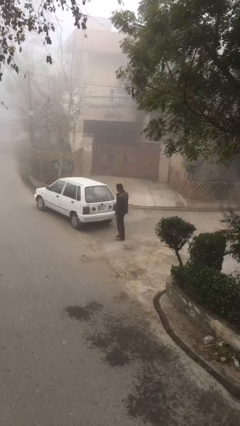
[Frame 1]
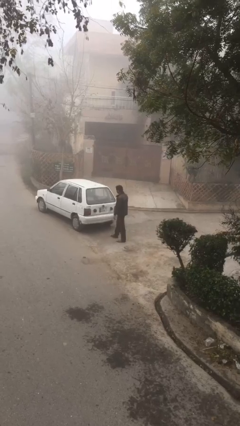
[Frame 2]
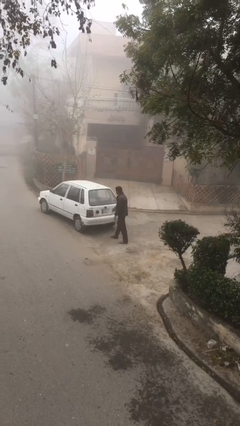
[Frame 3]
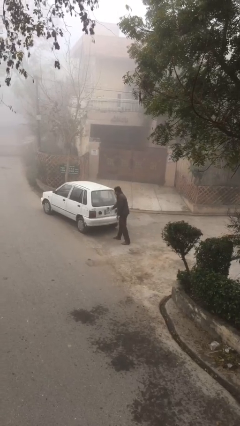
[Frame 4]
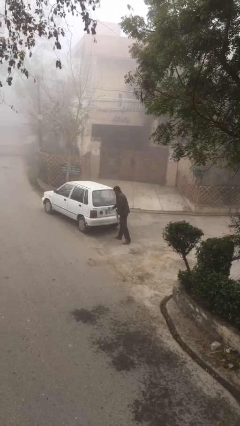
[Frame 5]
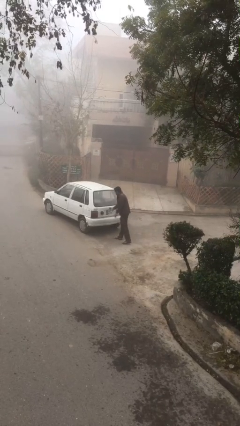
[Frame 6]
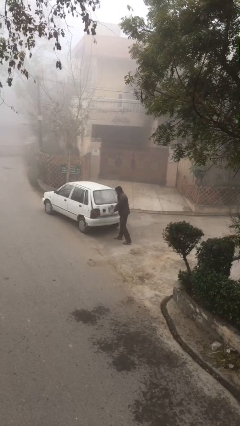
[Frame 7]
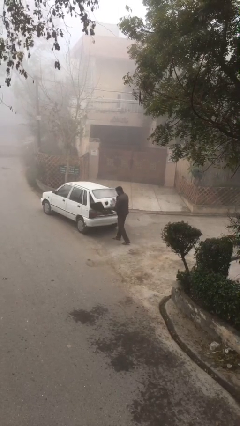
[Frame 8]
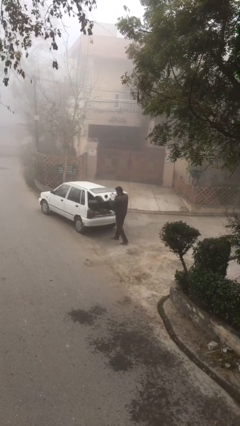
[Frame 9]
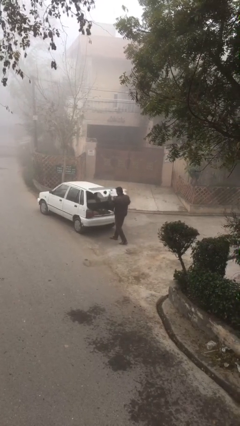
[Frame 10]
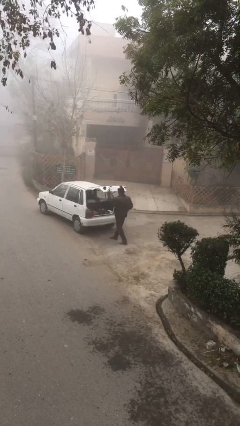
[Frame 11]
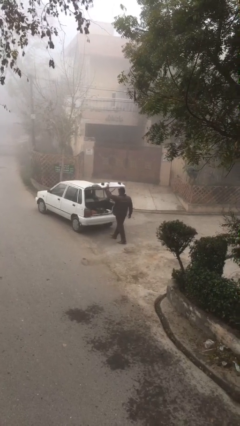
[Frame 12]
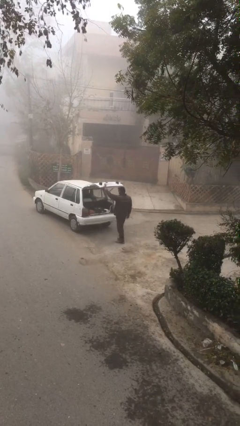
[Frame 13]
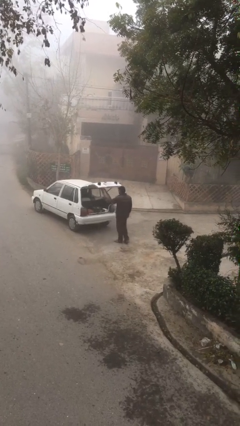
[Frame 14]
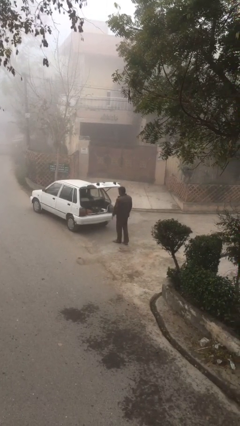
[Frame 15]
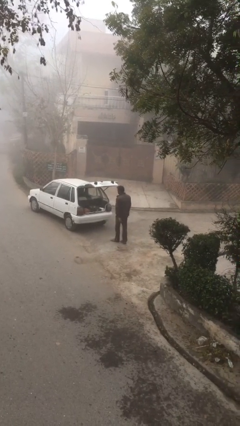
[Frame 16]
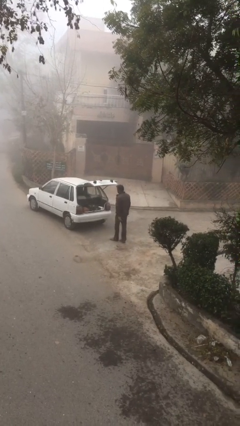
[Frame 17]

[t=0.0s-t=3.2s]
person opens car trunk

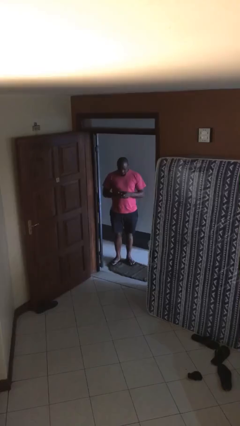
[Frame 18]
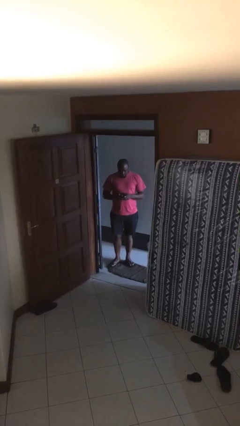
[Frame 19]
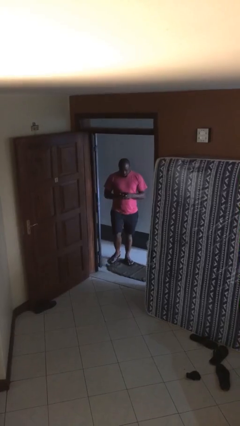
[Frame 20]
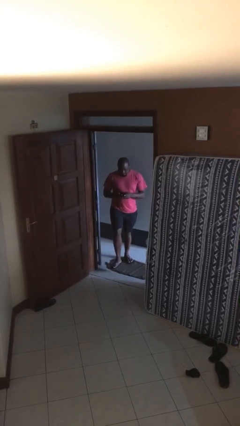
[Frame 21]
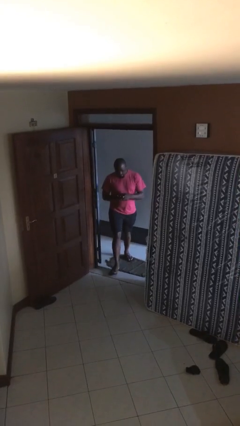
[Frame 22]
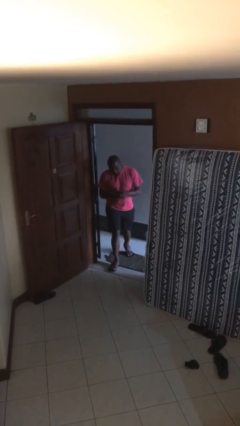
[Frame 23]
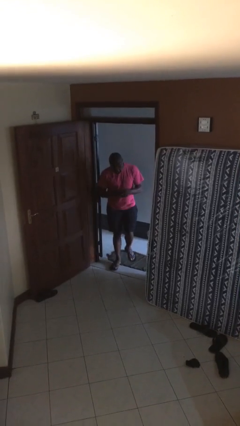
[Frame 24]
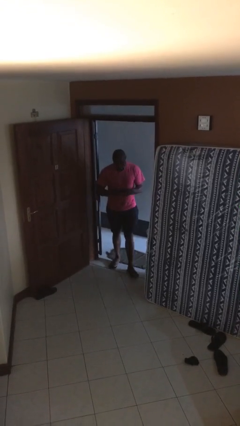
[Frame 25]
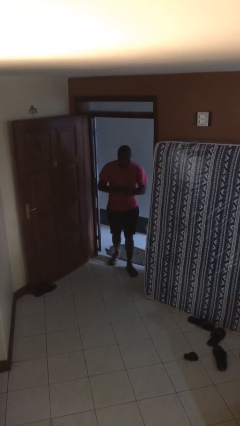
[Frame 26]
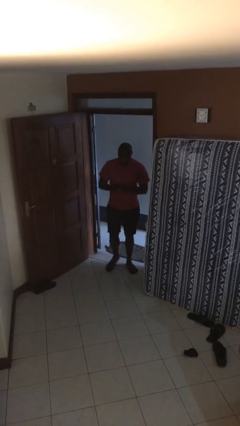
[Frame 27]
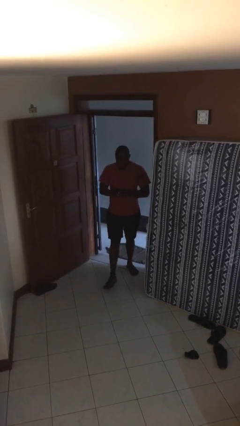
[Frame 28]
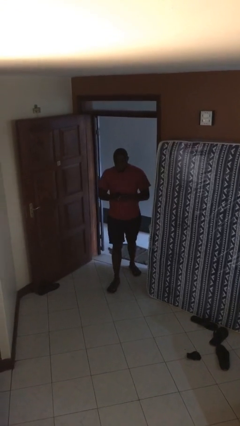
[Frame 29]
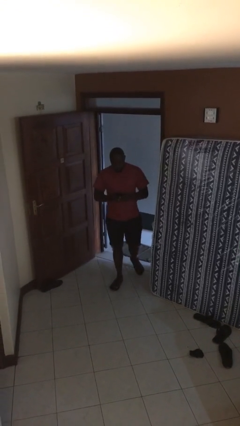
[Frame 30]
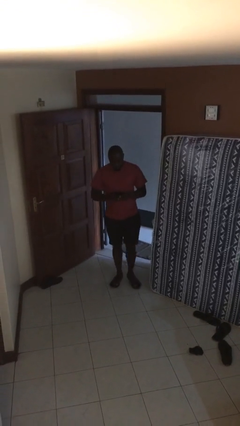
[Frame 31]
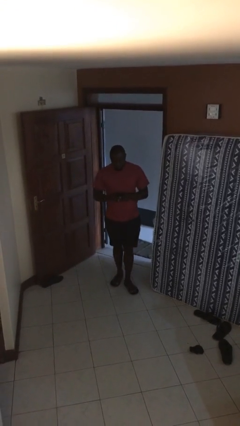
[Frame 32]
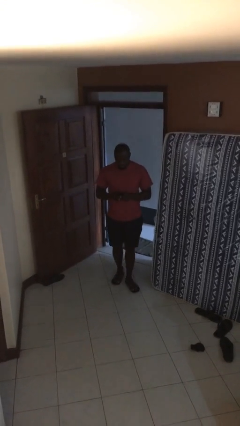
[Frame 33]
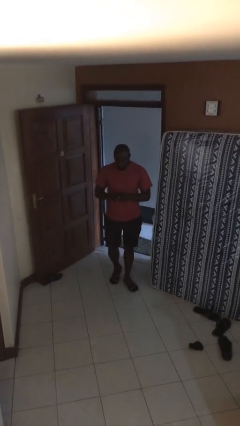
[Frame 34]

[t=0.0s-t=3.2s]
person enters scene through structure

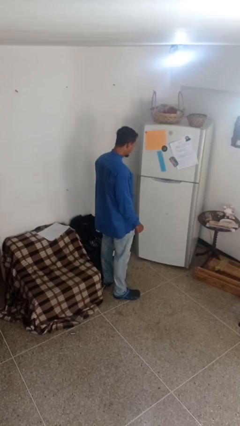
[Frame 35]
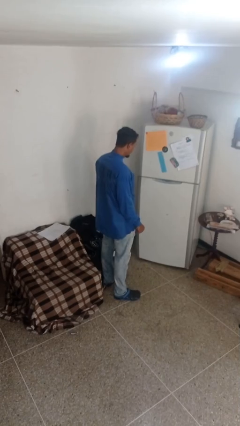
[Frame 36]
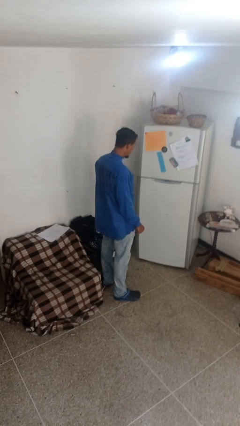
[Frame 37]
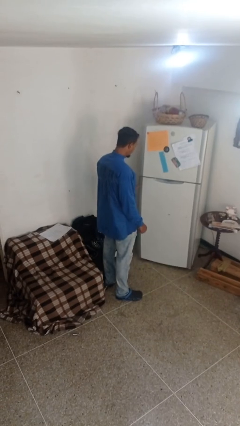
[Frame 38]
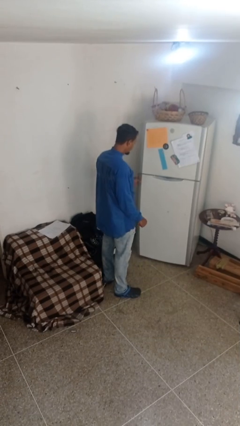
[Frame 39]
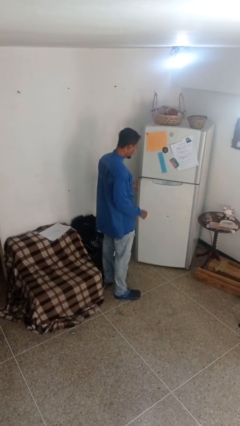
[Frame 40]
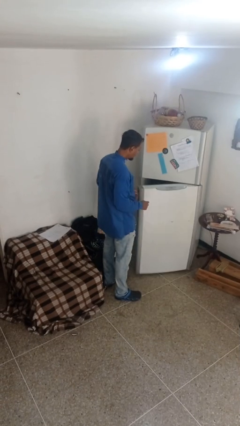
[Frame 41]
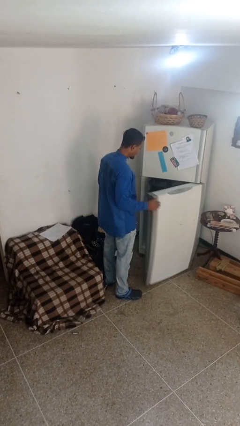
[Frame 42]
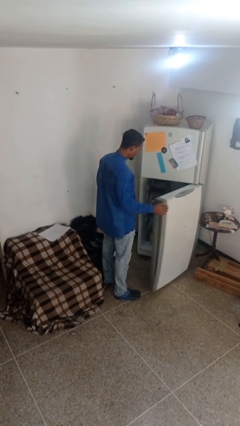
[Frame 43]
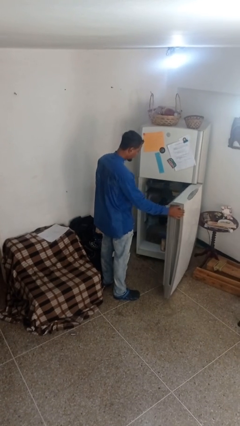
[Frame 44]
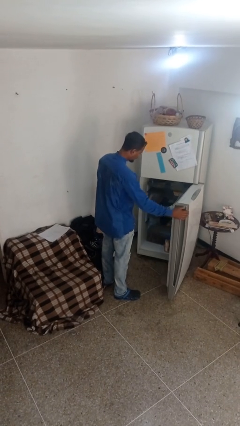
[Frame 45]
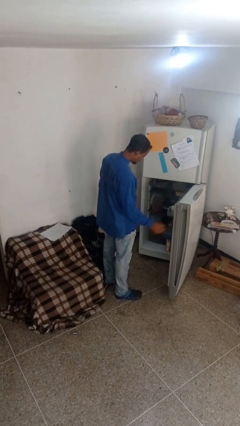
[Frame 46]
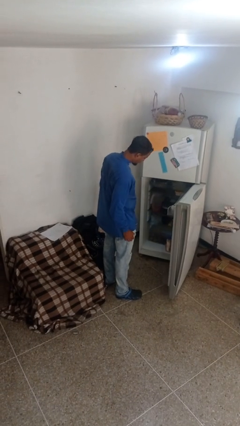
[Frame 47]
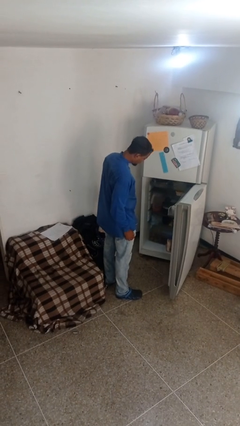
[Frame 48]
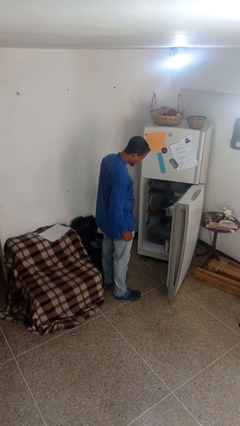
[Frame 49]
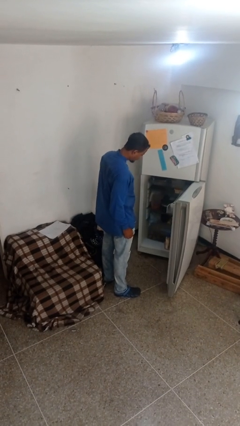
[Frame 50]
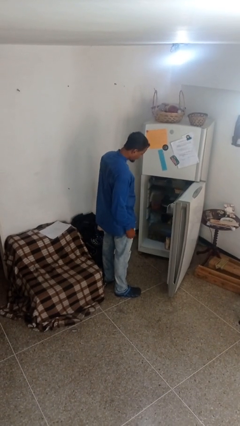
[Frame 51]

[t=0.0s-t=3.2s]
person opens refrigerator

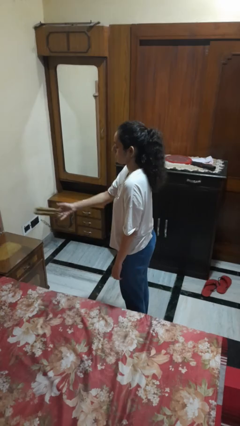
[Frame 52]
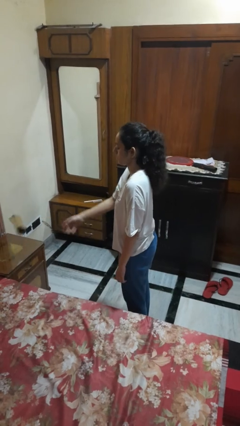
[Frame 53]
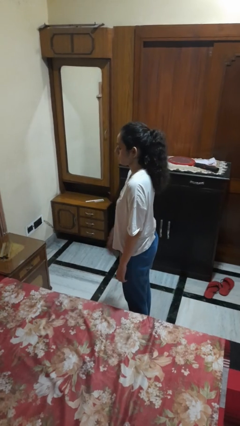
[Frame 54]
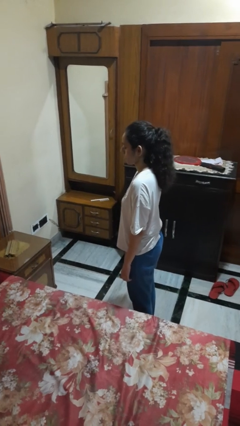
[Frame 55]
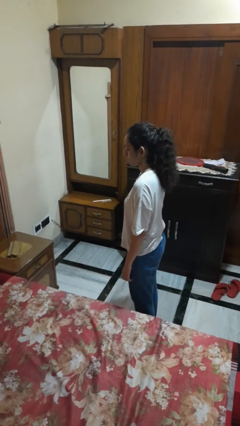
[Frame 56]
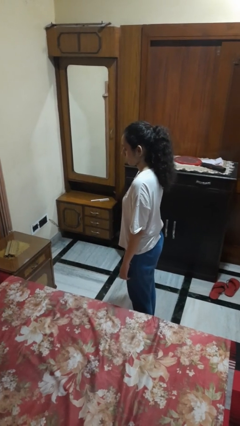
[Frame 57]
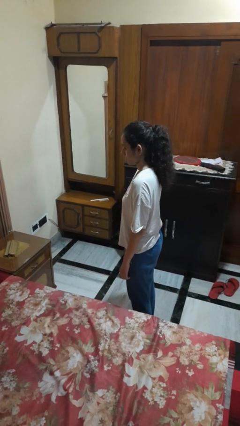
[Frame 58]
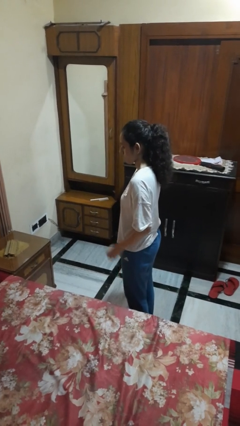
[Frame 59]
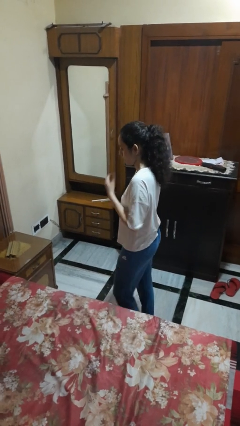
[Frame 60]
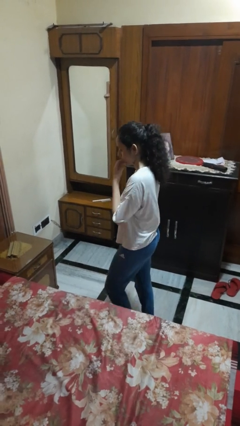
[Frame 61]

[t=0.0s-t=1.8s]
person throws object on table

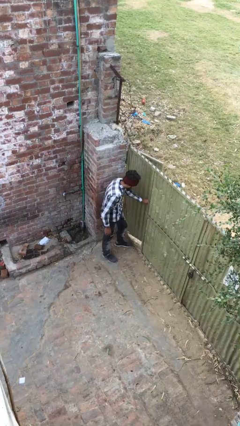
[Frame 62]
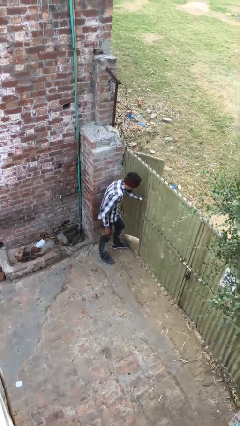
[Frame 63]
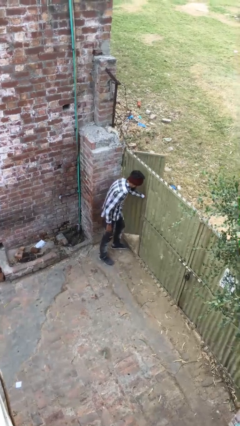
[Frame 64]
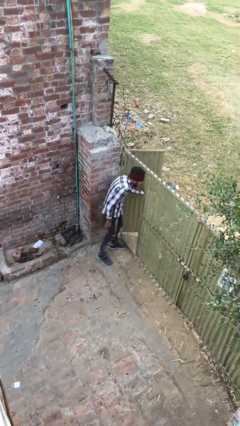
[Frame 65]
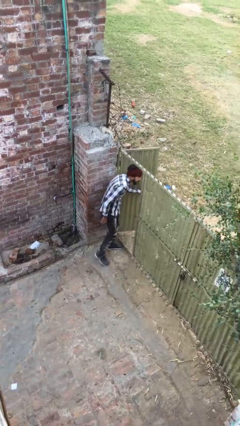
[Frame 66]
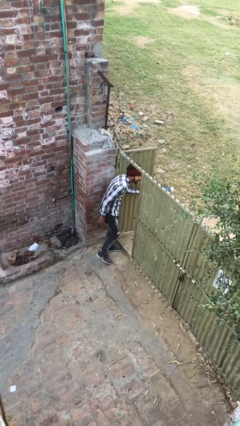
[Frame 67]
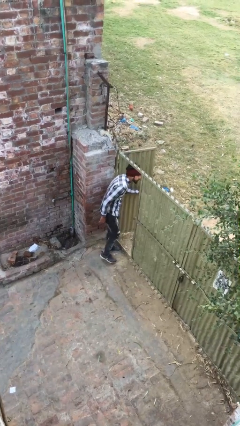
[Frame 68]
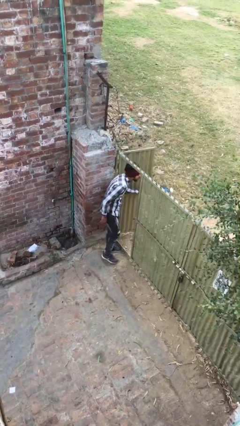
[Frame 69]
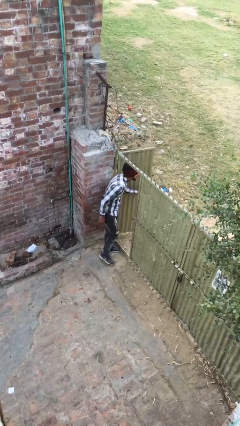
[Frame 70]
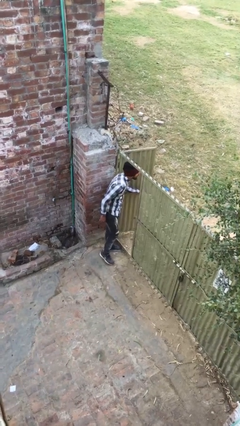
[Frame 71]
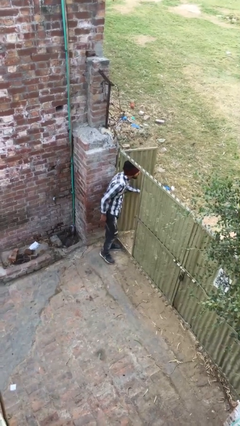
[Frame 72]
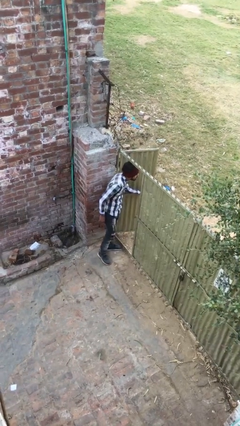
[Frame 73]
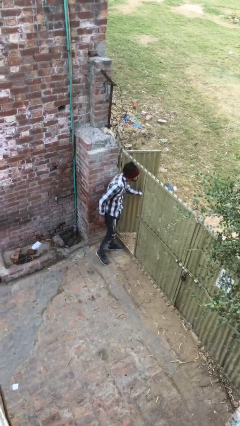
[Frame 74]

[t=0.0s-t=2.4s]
person opens facility door

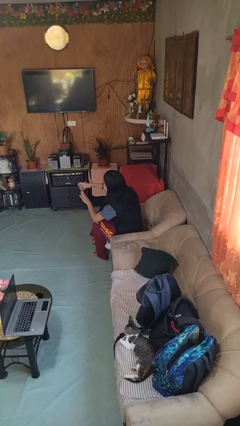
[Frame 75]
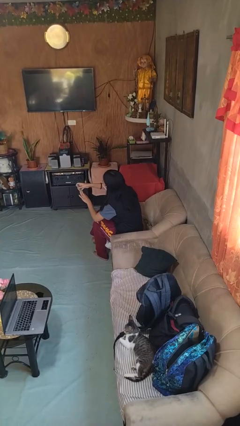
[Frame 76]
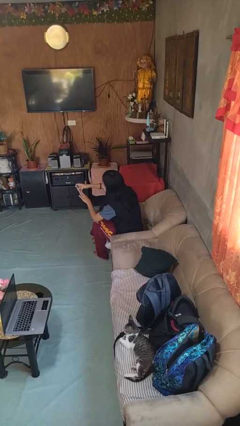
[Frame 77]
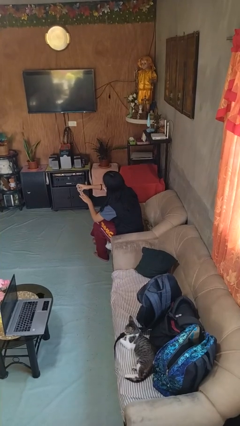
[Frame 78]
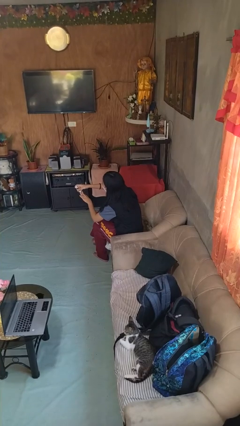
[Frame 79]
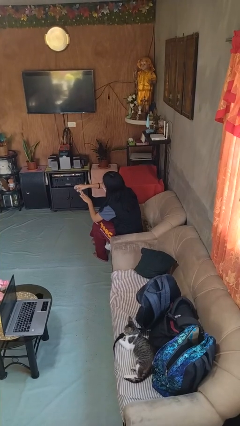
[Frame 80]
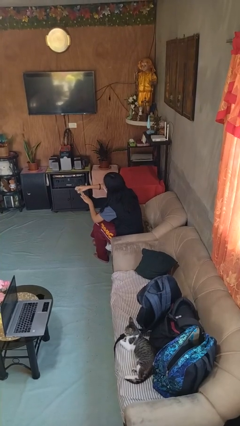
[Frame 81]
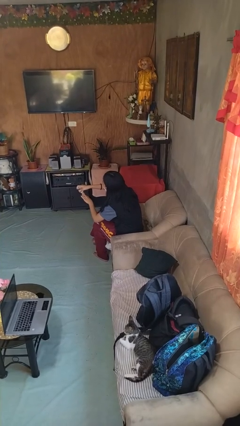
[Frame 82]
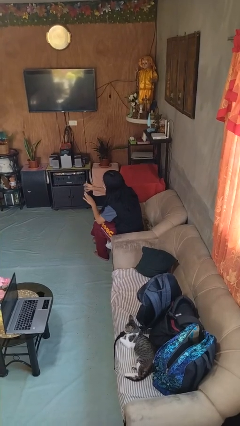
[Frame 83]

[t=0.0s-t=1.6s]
person clips fingernails

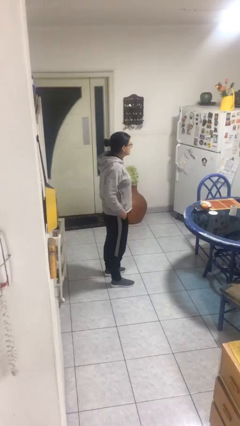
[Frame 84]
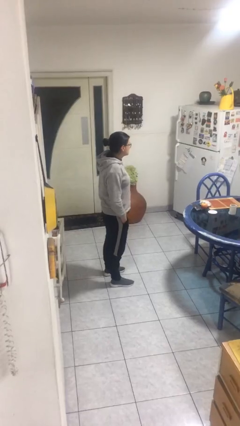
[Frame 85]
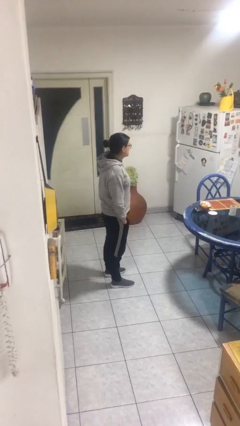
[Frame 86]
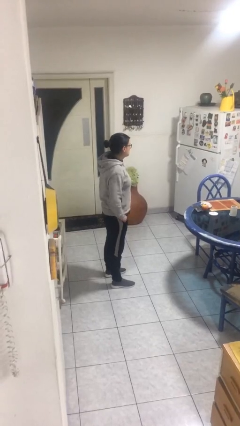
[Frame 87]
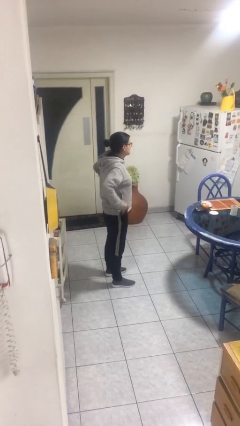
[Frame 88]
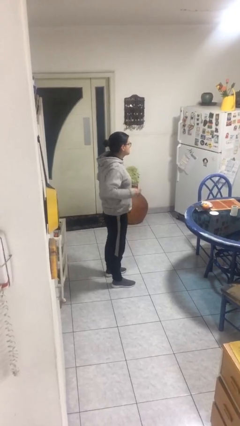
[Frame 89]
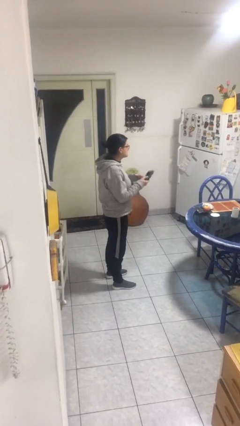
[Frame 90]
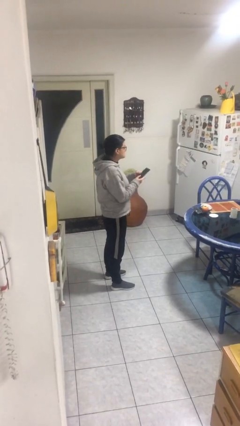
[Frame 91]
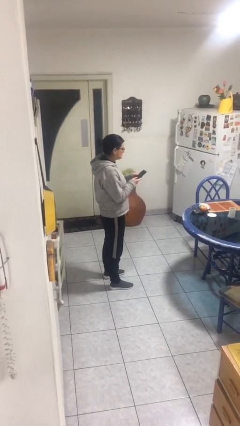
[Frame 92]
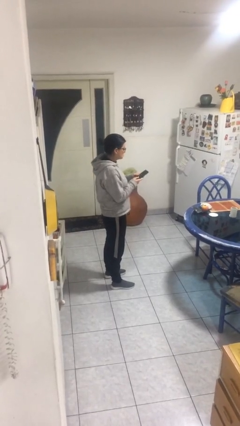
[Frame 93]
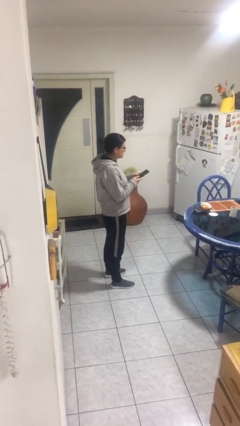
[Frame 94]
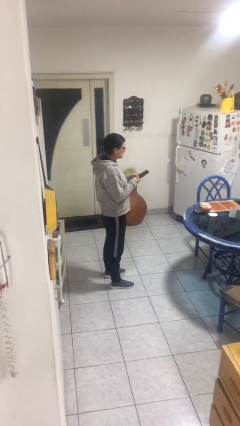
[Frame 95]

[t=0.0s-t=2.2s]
person takes phone from pocket
